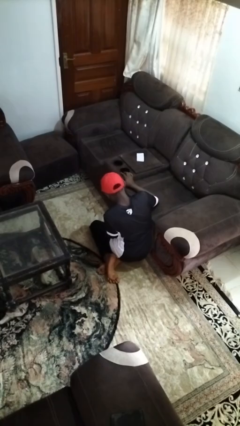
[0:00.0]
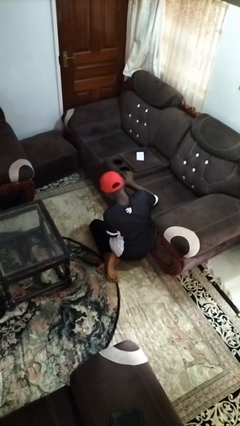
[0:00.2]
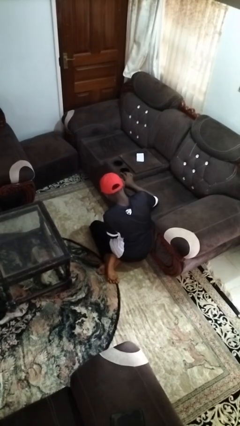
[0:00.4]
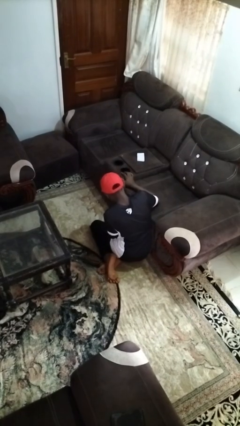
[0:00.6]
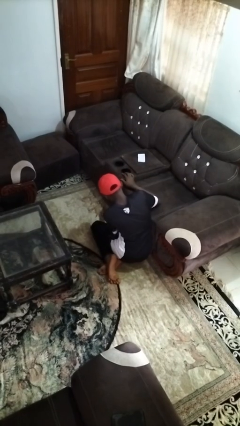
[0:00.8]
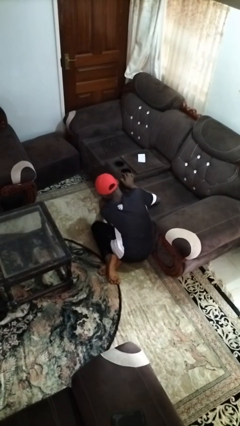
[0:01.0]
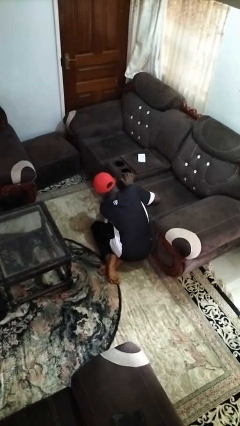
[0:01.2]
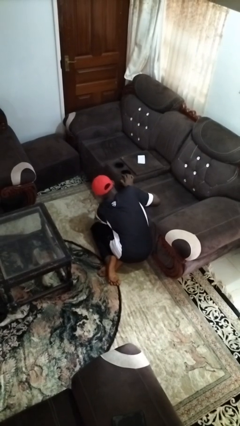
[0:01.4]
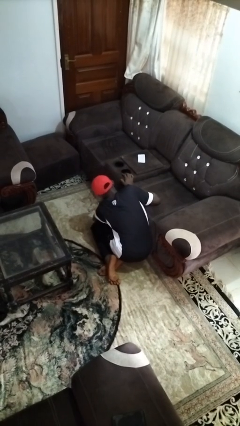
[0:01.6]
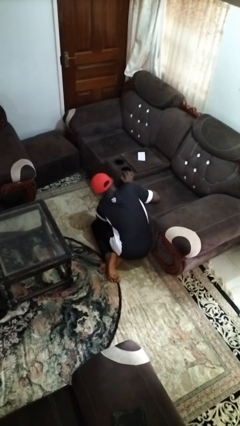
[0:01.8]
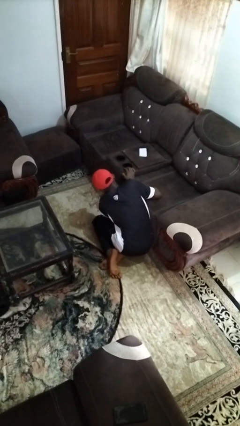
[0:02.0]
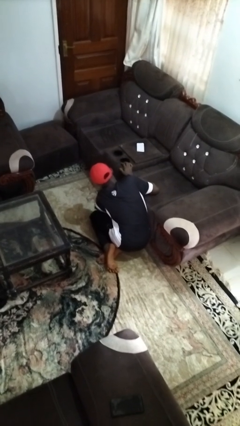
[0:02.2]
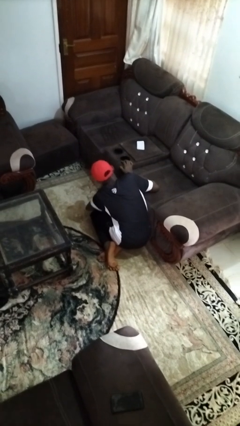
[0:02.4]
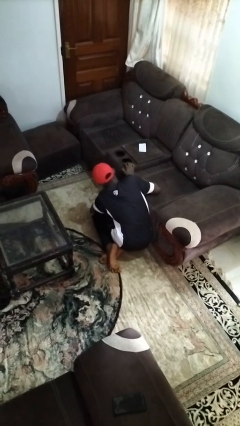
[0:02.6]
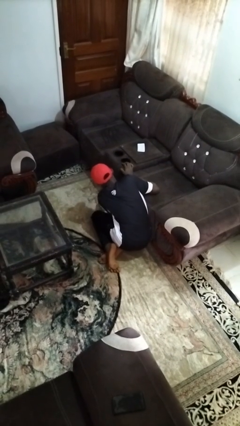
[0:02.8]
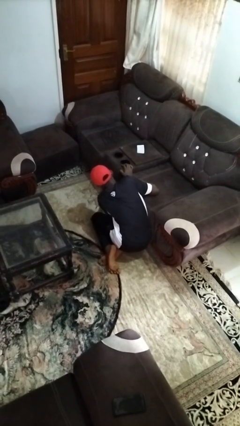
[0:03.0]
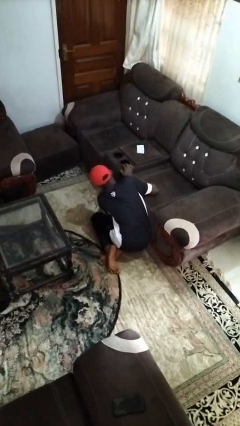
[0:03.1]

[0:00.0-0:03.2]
person searches under couch

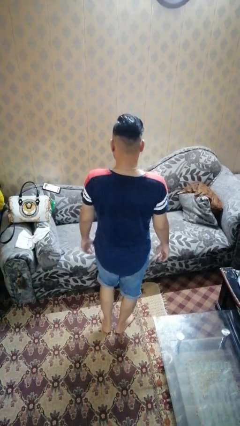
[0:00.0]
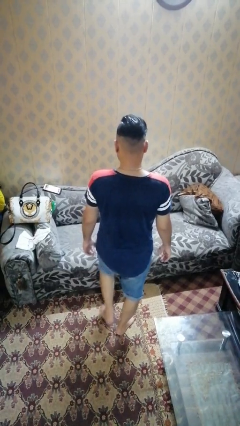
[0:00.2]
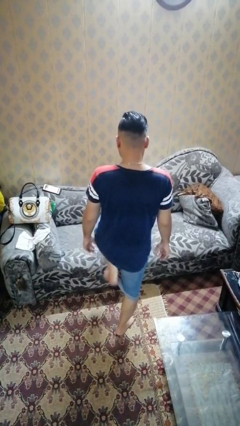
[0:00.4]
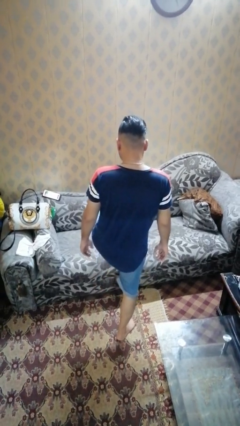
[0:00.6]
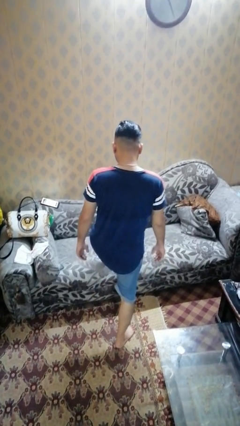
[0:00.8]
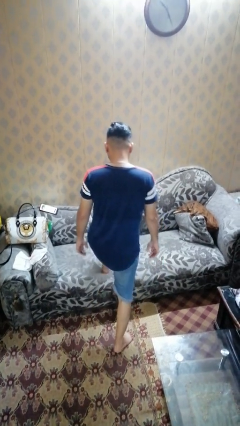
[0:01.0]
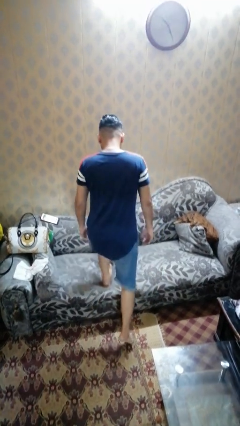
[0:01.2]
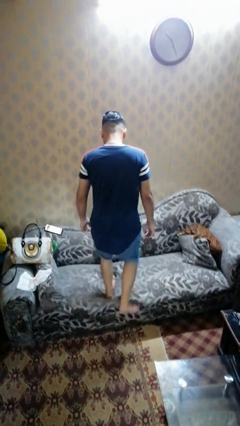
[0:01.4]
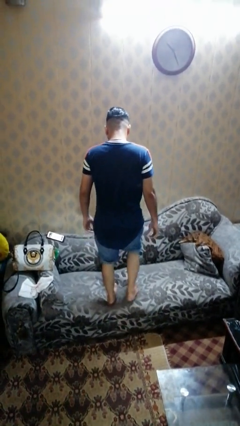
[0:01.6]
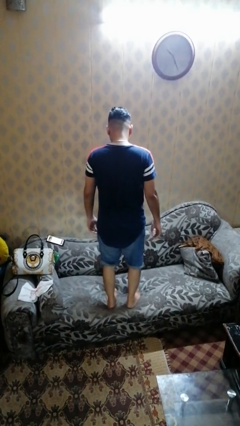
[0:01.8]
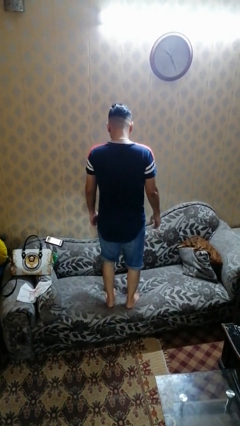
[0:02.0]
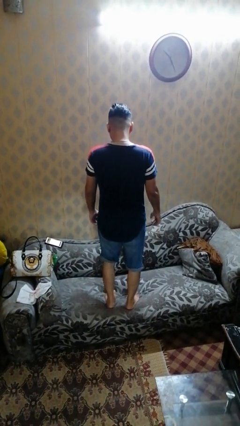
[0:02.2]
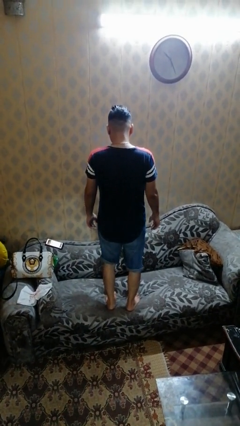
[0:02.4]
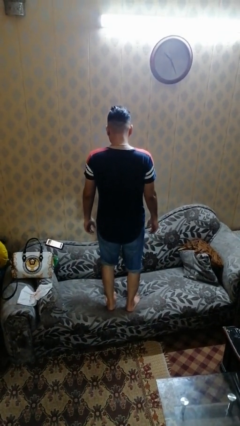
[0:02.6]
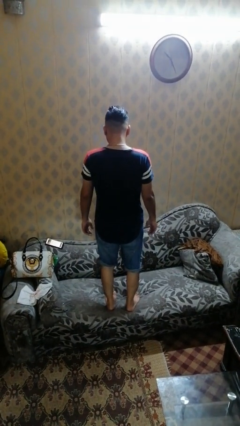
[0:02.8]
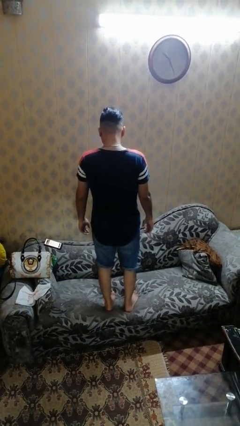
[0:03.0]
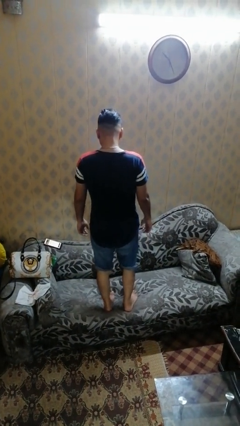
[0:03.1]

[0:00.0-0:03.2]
person climbs on couch

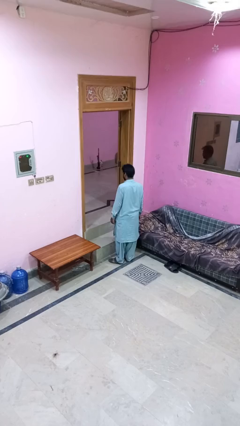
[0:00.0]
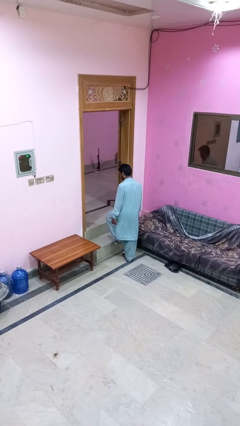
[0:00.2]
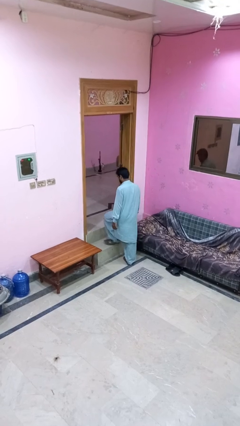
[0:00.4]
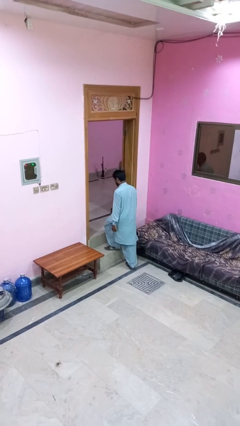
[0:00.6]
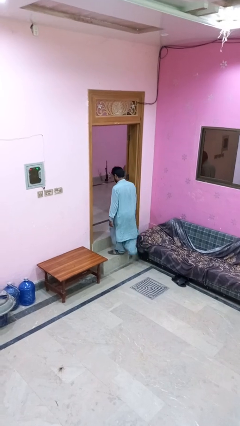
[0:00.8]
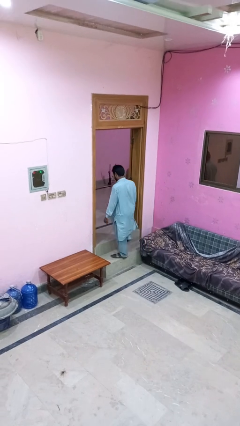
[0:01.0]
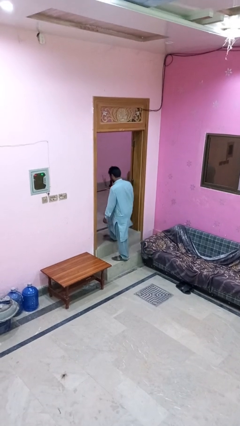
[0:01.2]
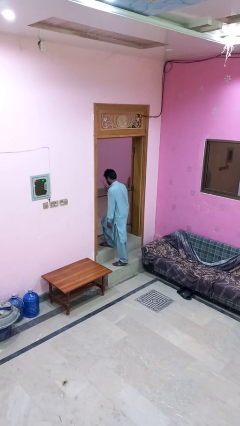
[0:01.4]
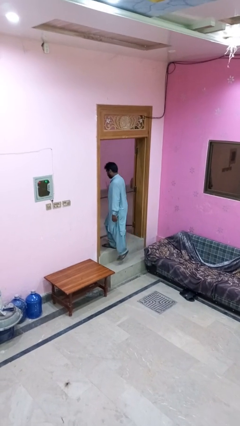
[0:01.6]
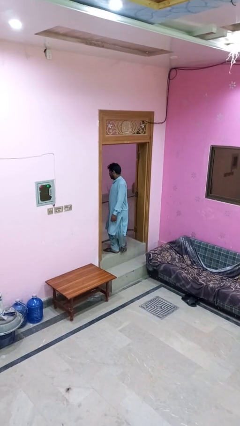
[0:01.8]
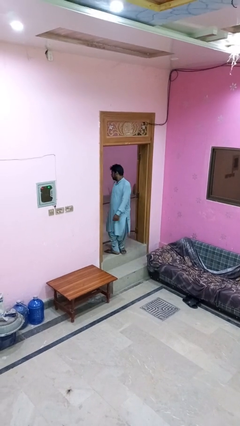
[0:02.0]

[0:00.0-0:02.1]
person climbs up stairs

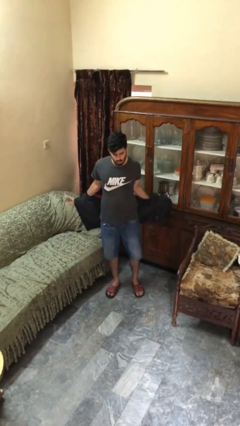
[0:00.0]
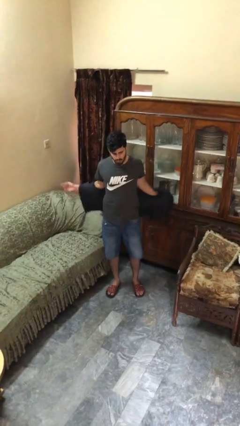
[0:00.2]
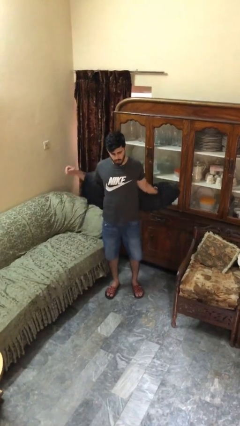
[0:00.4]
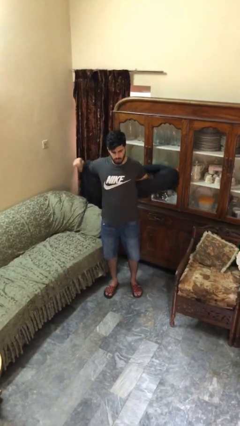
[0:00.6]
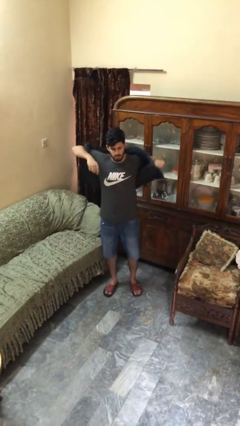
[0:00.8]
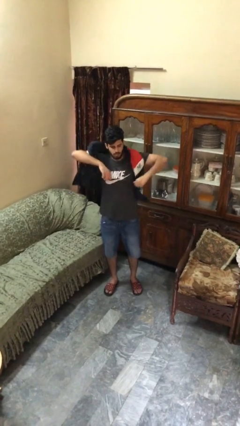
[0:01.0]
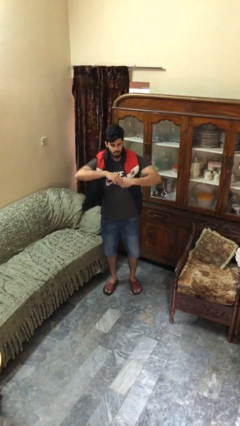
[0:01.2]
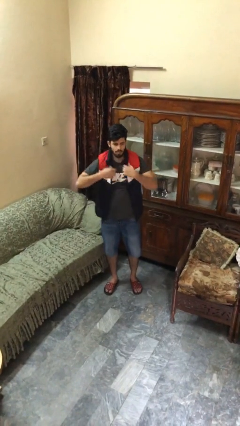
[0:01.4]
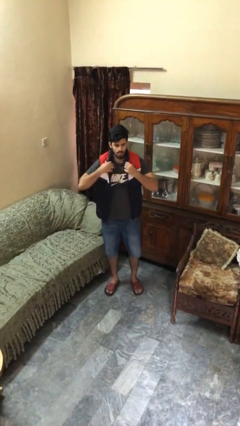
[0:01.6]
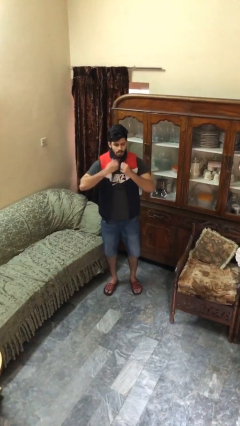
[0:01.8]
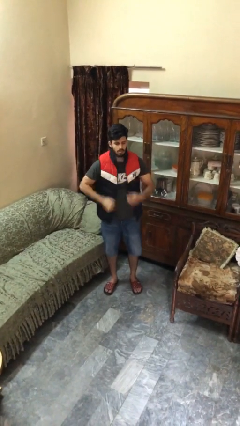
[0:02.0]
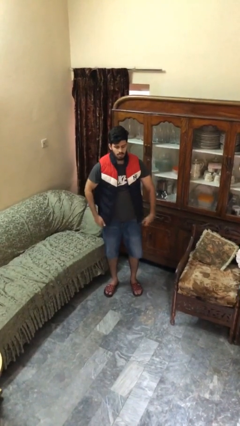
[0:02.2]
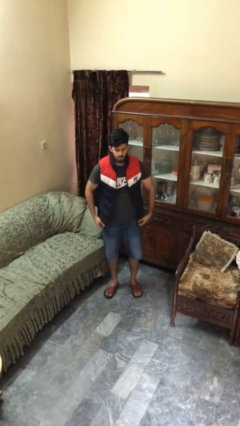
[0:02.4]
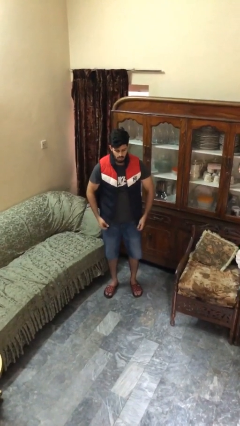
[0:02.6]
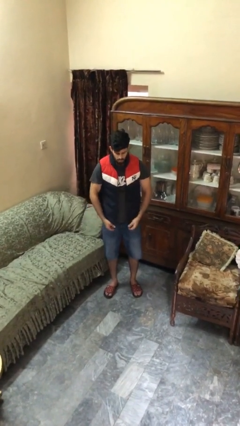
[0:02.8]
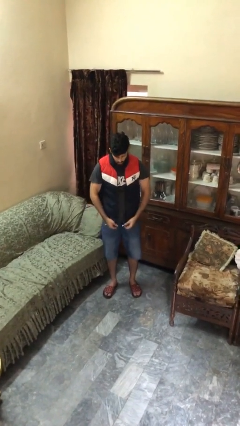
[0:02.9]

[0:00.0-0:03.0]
person puts on jacket

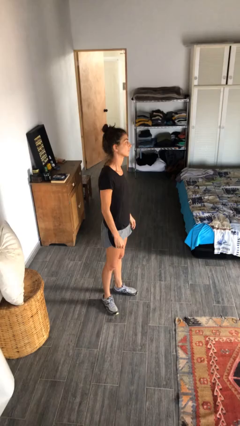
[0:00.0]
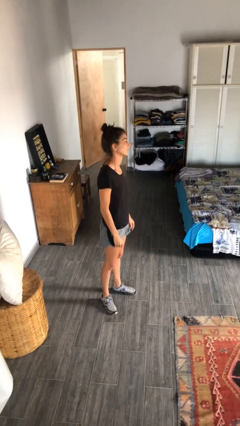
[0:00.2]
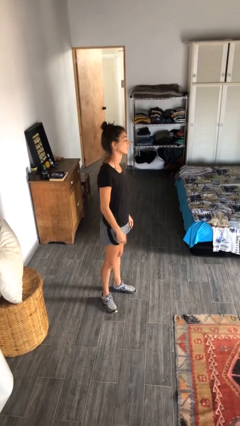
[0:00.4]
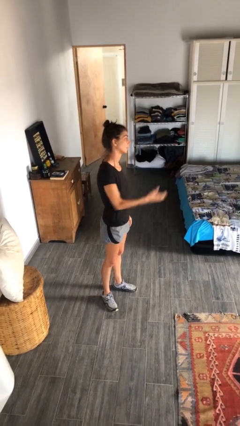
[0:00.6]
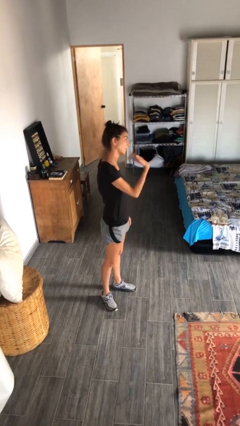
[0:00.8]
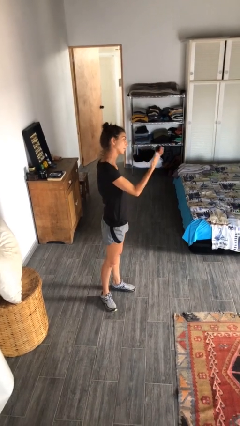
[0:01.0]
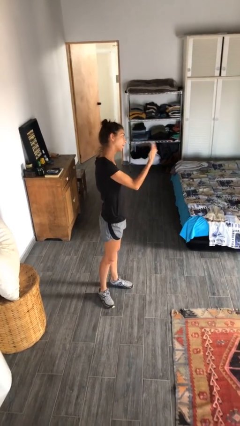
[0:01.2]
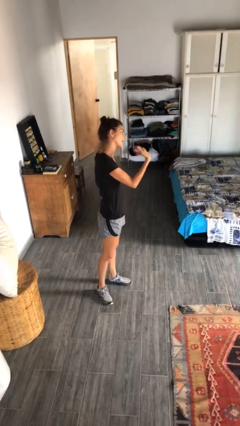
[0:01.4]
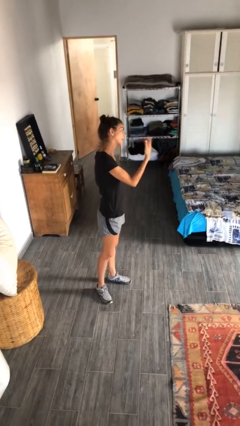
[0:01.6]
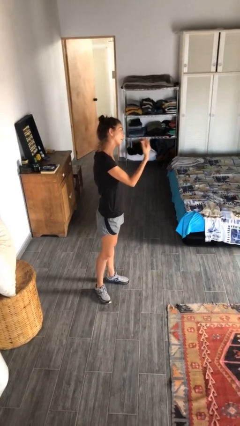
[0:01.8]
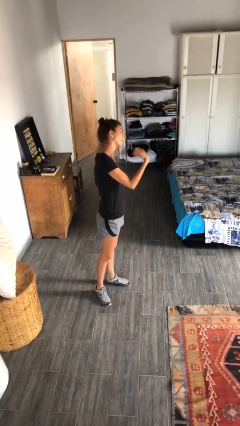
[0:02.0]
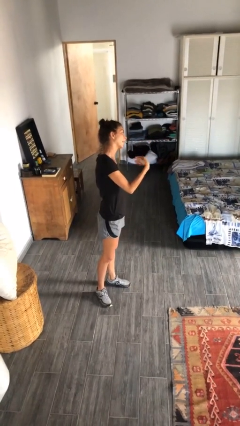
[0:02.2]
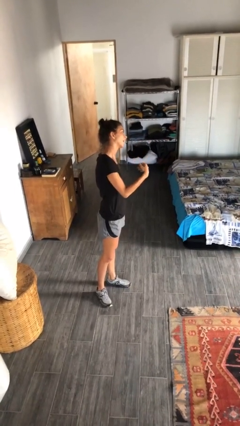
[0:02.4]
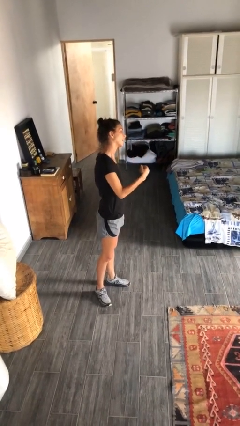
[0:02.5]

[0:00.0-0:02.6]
person gestures come here

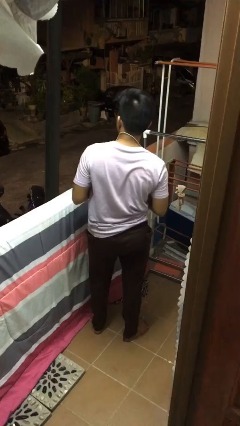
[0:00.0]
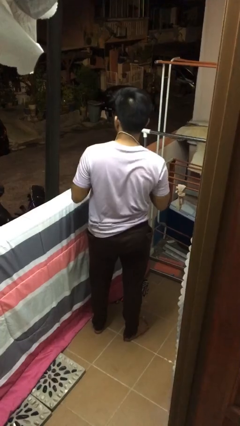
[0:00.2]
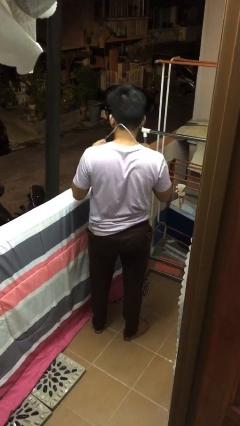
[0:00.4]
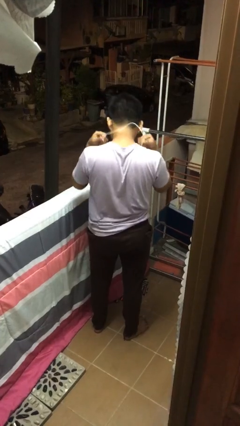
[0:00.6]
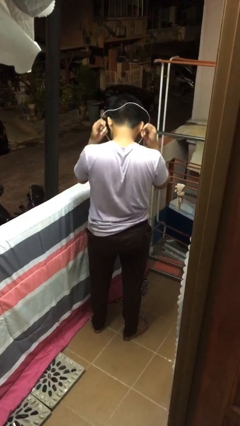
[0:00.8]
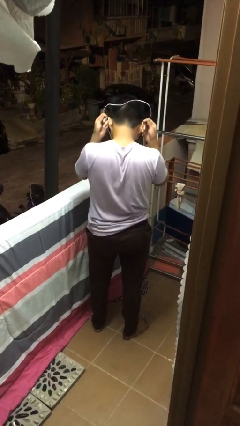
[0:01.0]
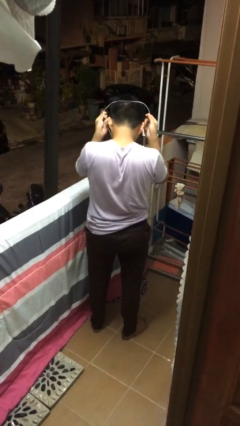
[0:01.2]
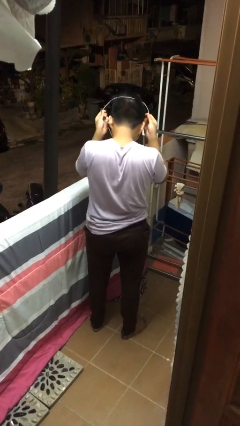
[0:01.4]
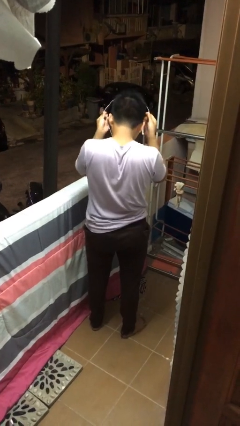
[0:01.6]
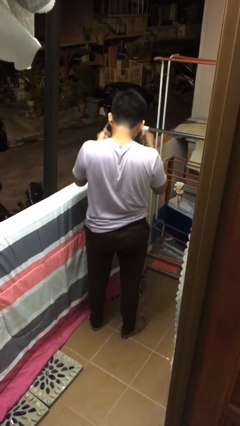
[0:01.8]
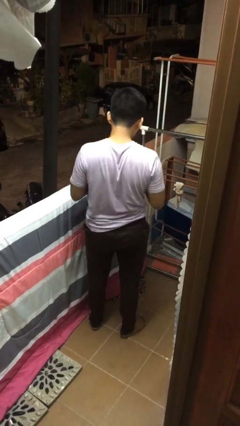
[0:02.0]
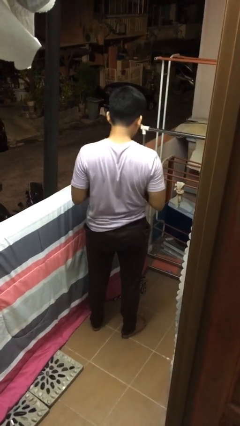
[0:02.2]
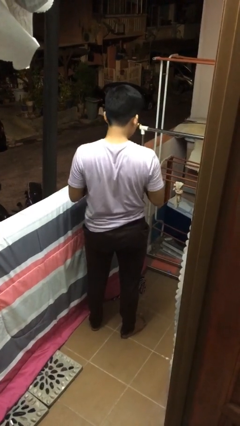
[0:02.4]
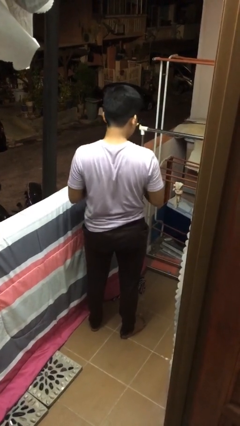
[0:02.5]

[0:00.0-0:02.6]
person takes off necklace

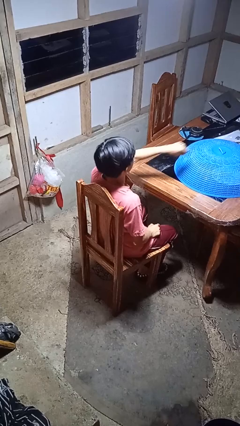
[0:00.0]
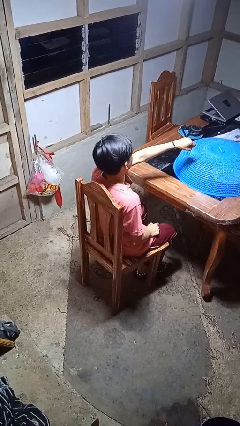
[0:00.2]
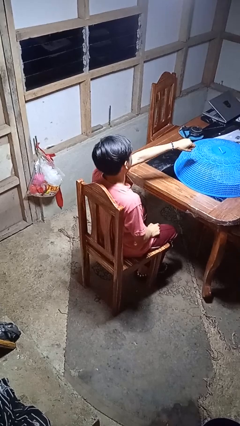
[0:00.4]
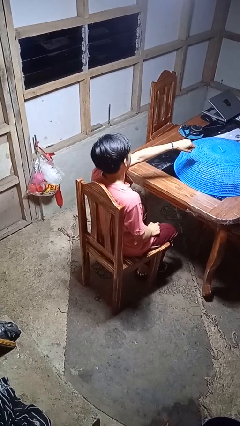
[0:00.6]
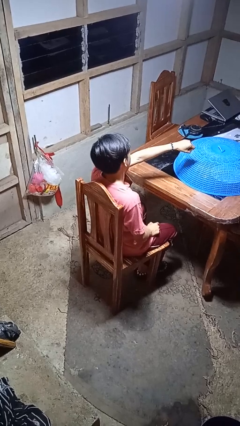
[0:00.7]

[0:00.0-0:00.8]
person punches
